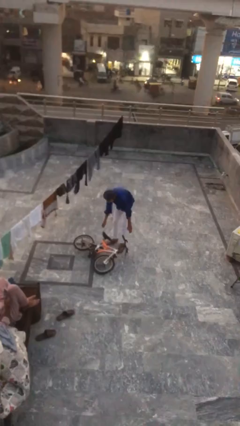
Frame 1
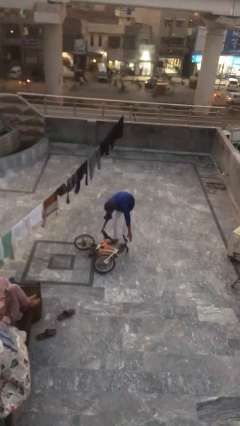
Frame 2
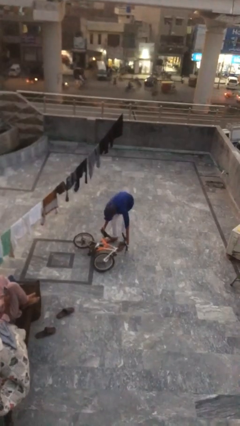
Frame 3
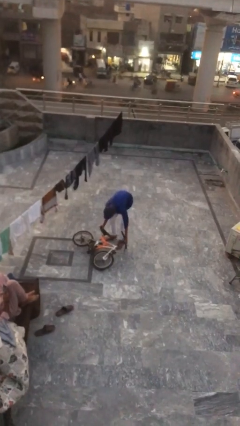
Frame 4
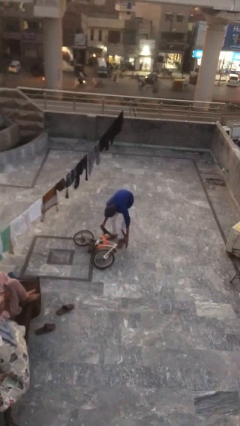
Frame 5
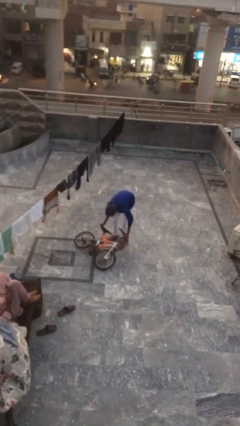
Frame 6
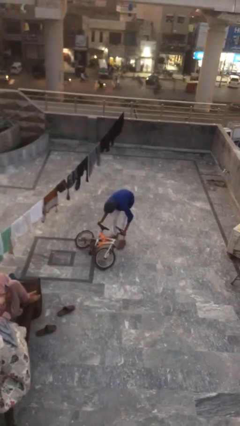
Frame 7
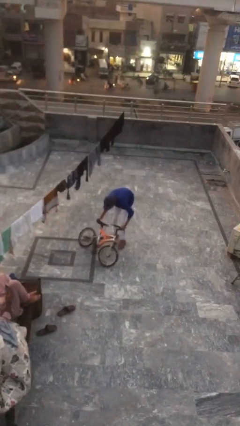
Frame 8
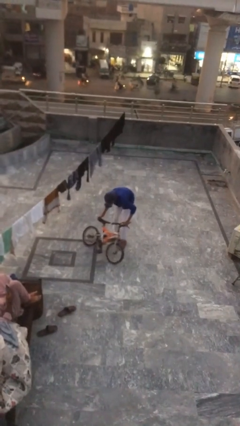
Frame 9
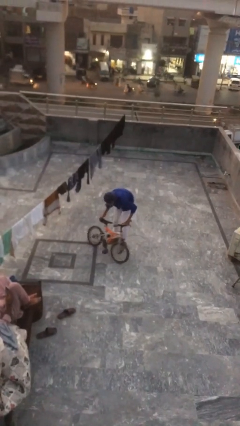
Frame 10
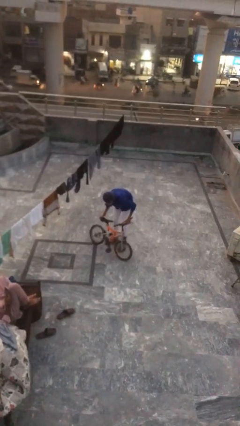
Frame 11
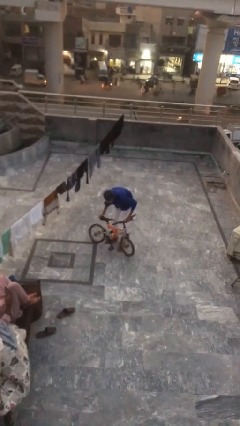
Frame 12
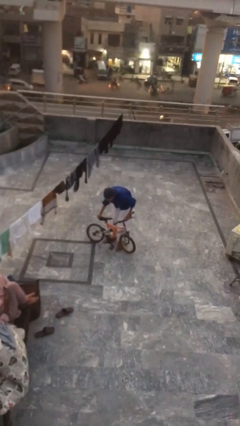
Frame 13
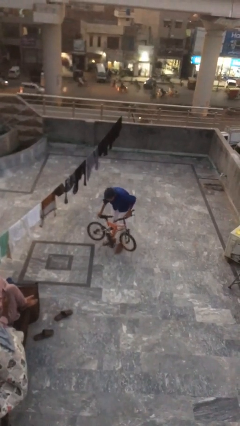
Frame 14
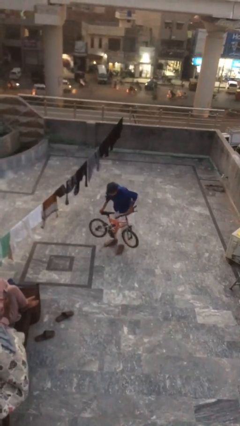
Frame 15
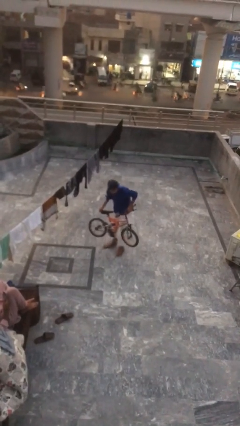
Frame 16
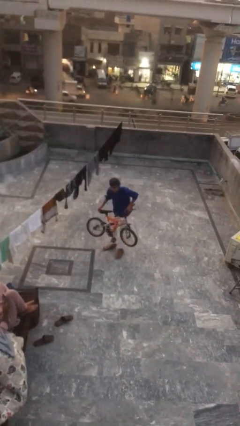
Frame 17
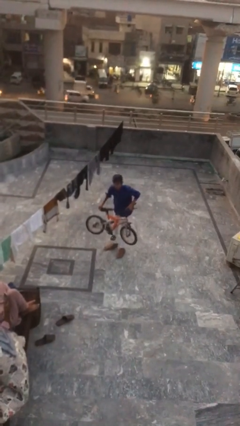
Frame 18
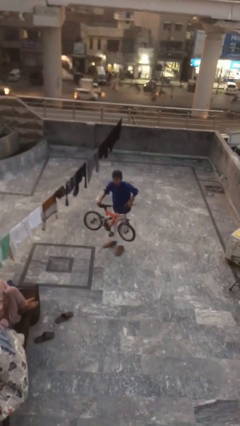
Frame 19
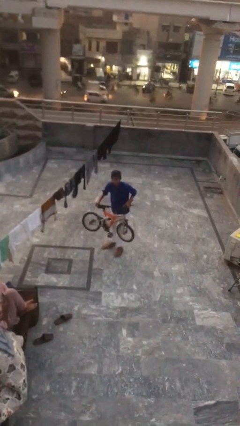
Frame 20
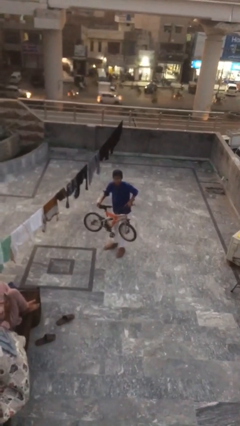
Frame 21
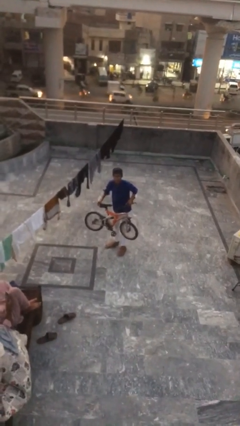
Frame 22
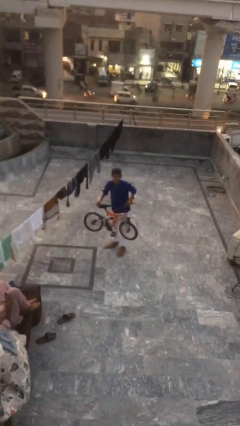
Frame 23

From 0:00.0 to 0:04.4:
person picks up object from floor

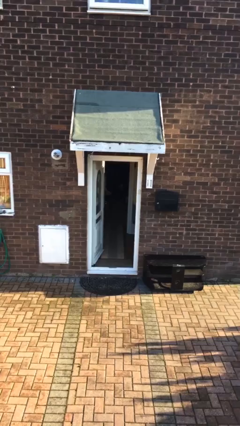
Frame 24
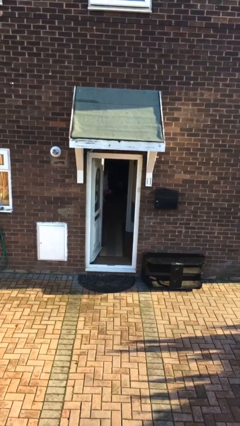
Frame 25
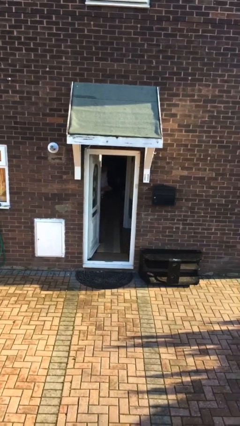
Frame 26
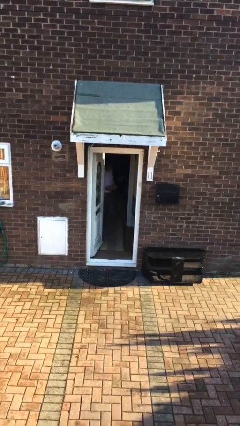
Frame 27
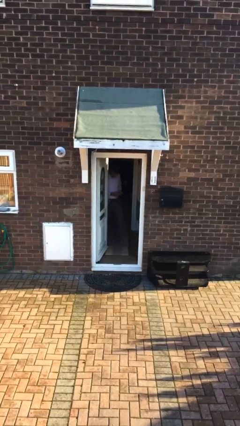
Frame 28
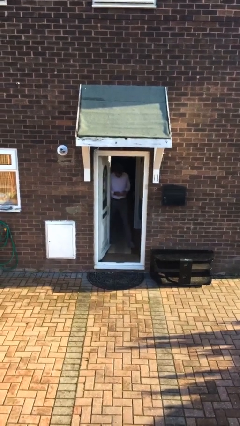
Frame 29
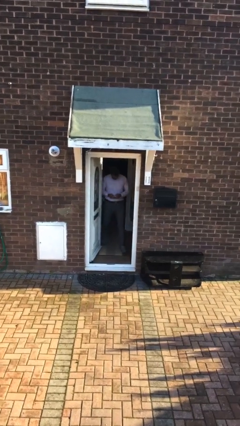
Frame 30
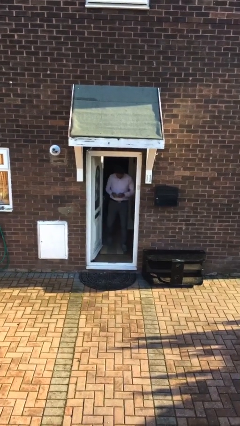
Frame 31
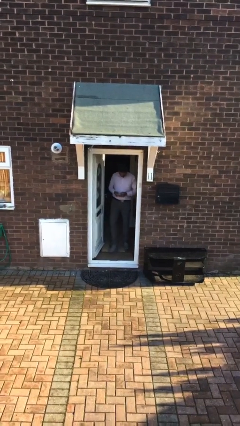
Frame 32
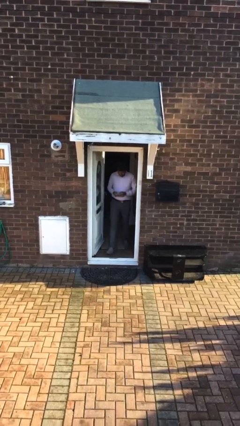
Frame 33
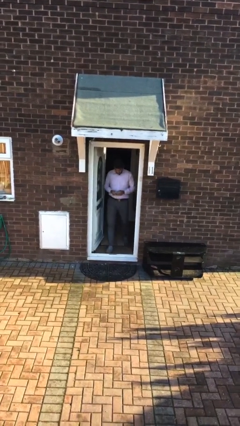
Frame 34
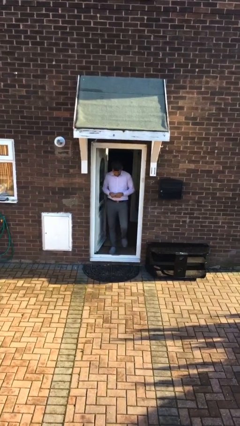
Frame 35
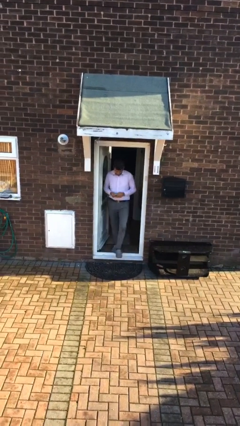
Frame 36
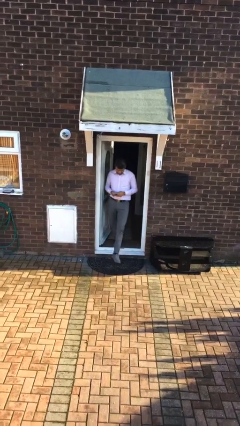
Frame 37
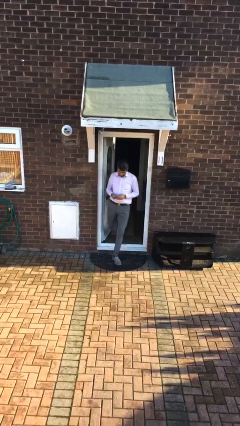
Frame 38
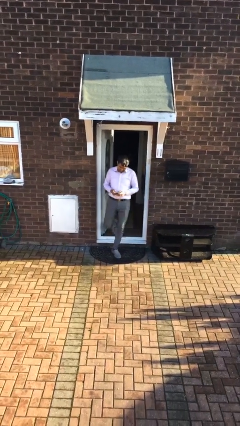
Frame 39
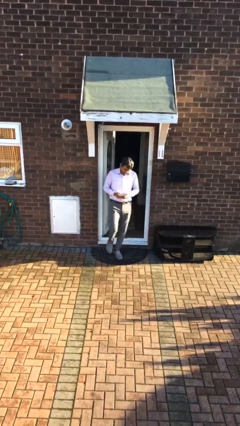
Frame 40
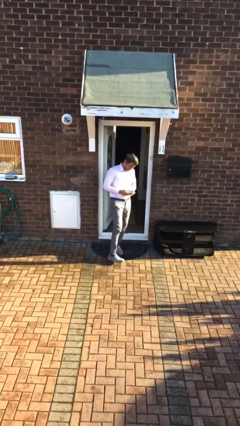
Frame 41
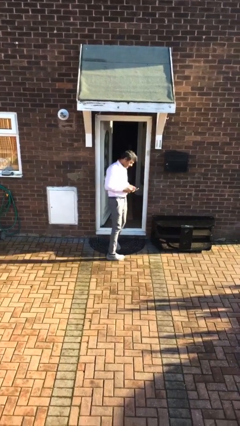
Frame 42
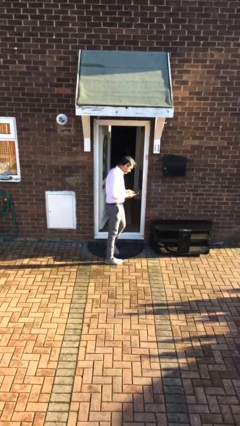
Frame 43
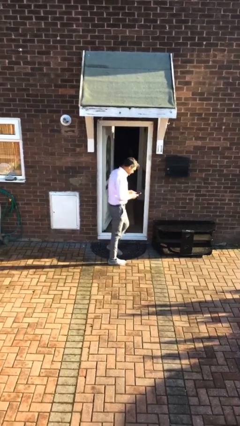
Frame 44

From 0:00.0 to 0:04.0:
person enters scene through structure

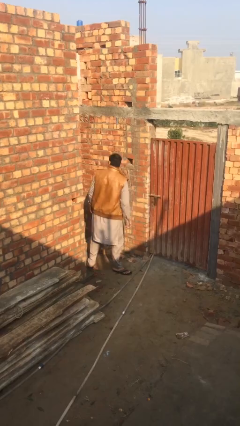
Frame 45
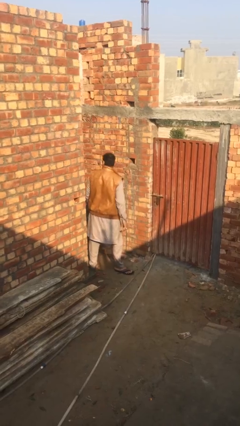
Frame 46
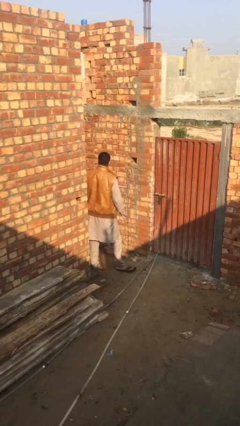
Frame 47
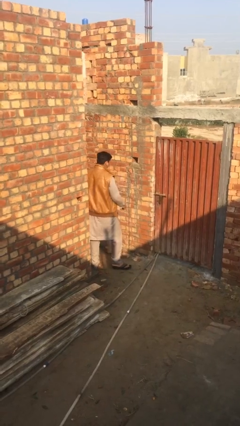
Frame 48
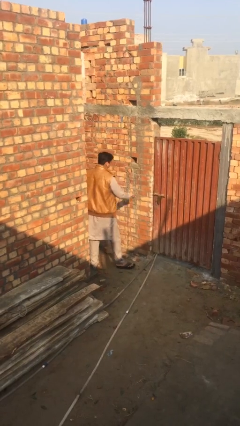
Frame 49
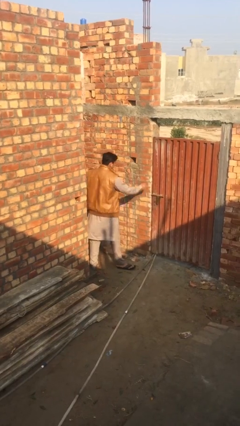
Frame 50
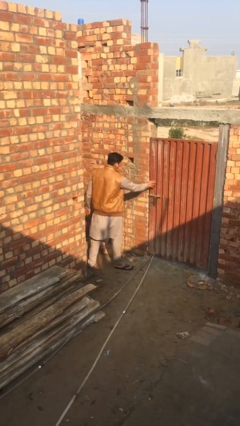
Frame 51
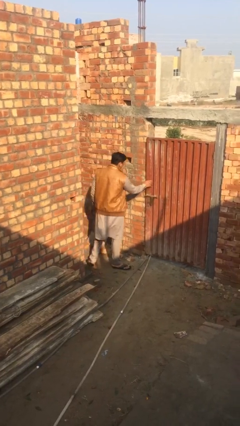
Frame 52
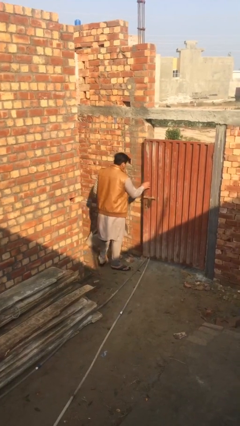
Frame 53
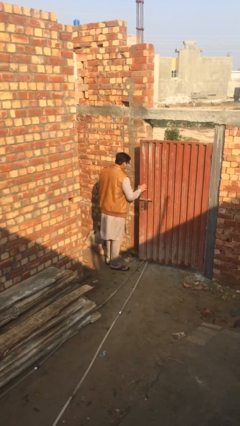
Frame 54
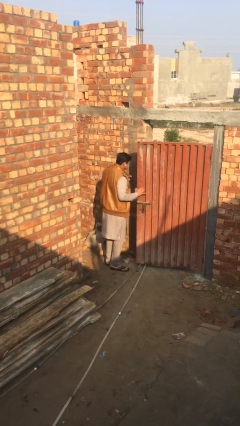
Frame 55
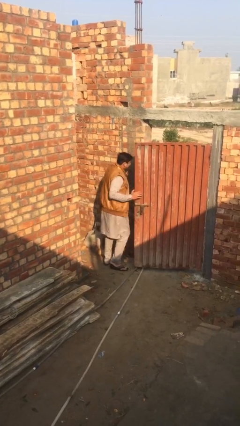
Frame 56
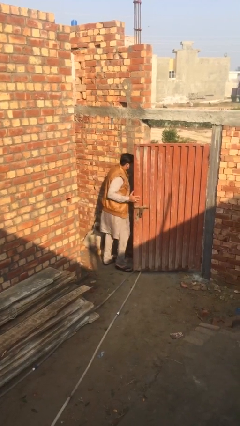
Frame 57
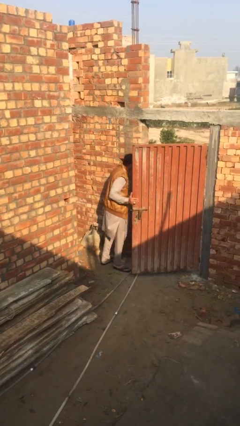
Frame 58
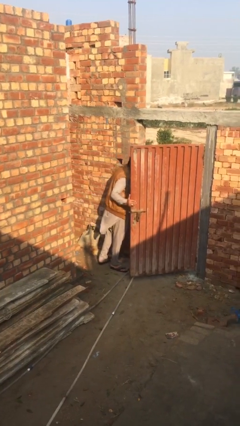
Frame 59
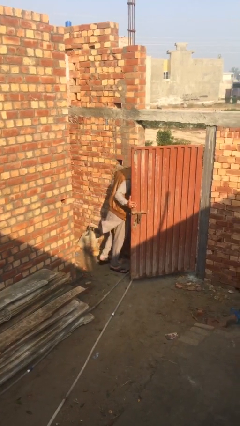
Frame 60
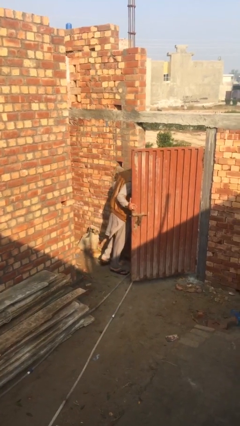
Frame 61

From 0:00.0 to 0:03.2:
person opens facility door

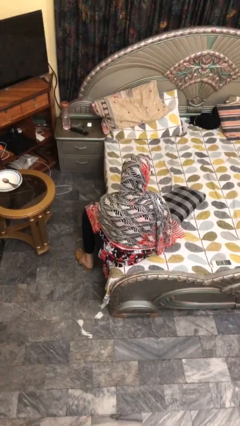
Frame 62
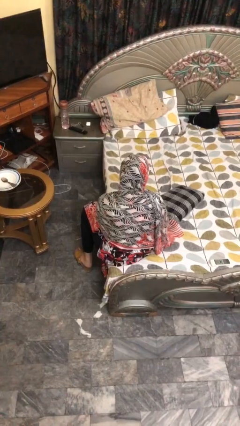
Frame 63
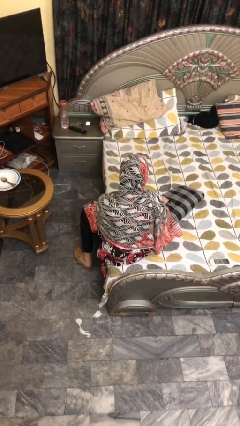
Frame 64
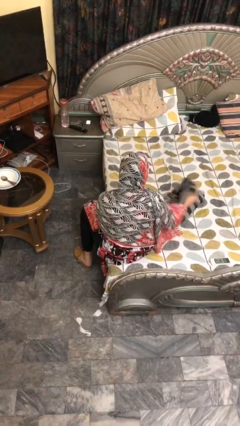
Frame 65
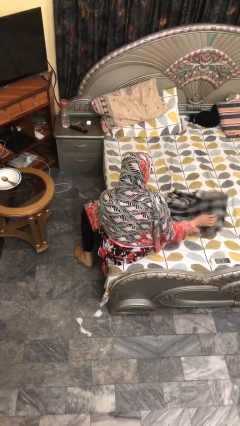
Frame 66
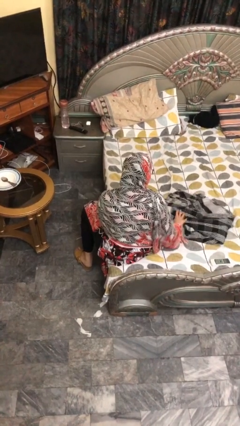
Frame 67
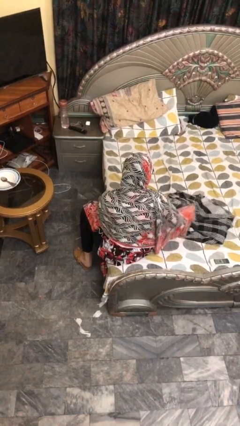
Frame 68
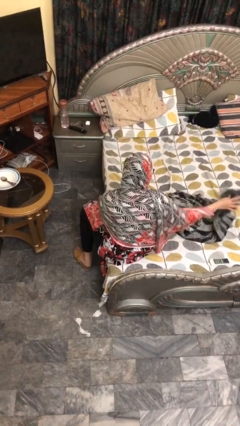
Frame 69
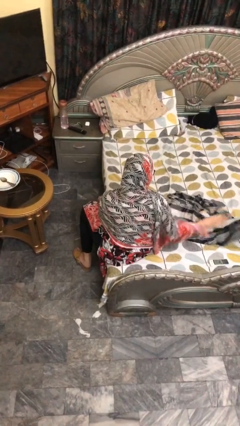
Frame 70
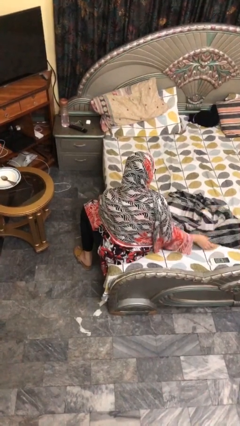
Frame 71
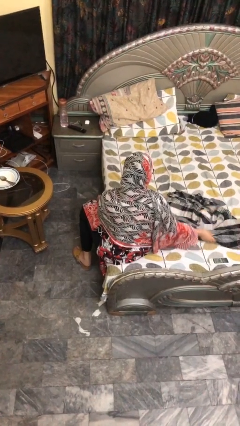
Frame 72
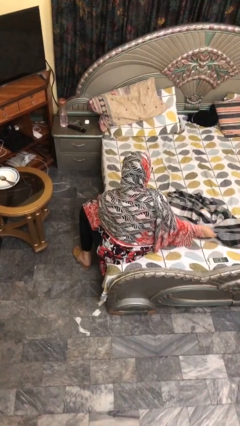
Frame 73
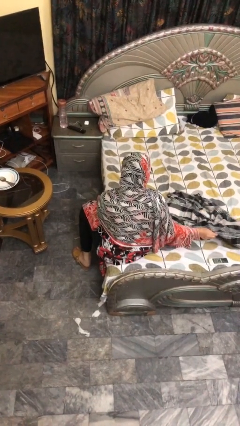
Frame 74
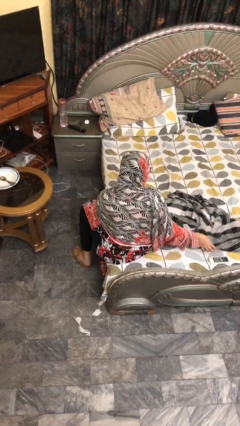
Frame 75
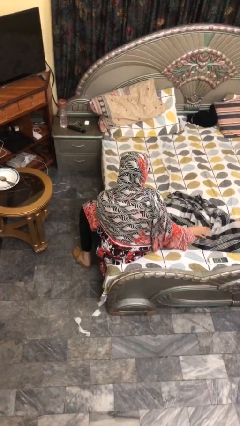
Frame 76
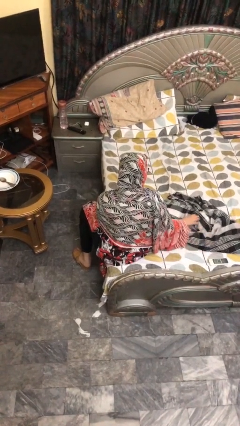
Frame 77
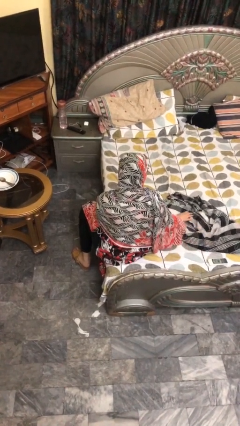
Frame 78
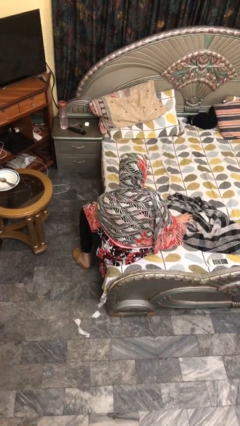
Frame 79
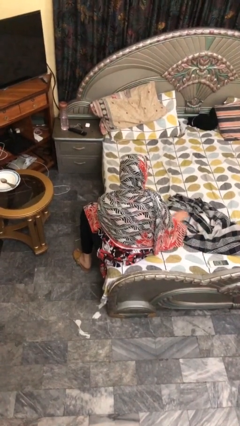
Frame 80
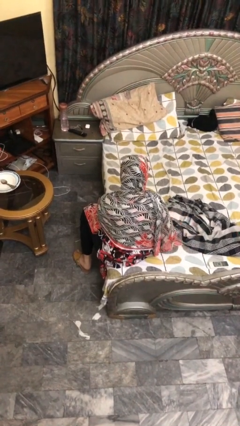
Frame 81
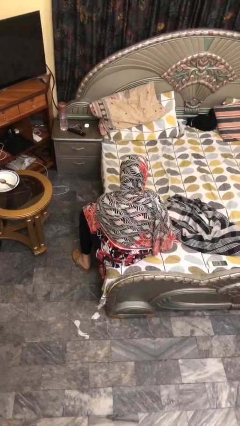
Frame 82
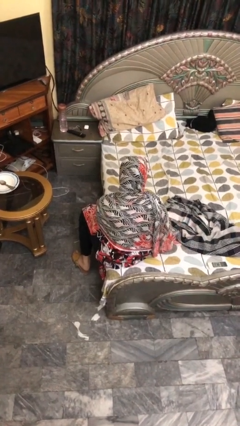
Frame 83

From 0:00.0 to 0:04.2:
person unfolds blanket

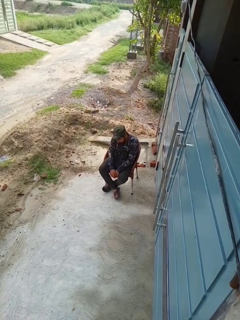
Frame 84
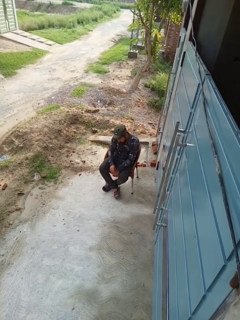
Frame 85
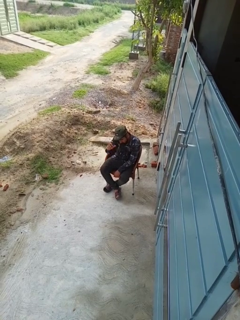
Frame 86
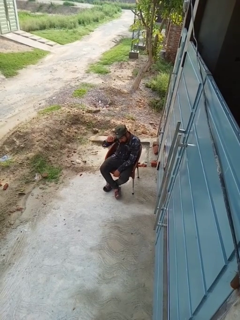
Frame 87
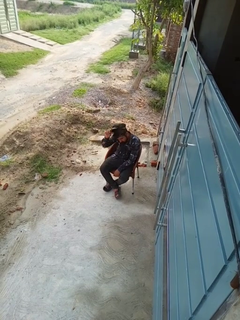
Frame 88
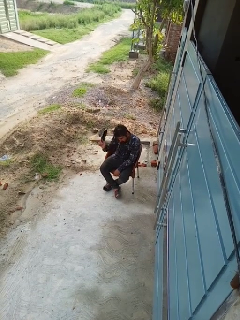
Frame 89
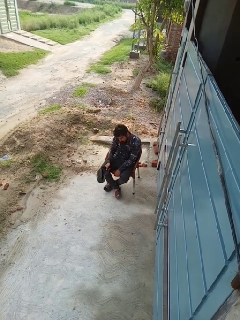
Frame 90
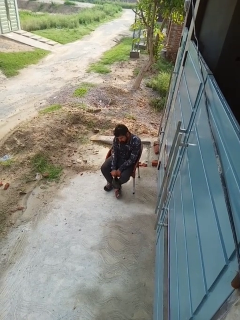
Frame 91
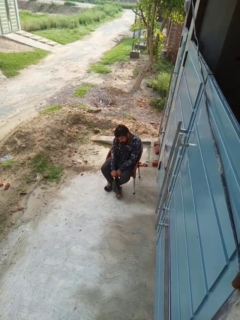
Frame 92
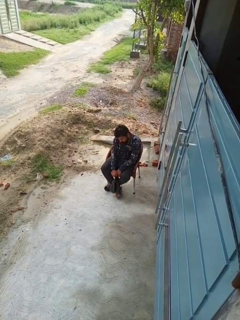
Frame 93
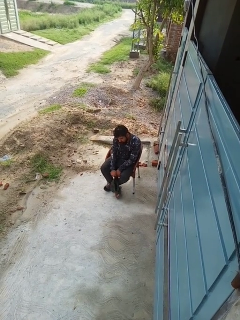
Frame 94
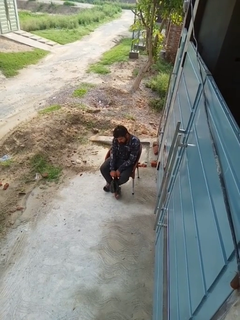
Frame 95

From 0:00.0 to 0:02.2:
person takes off hat
